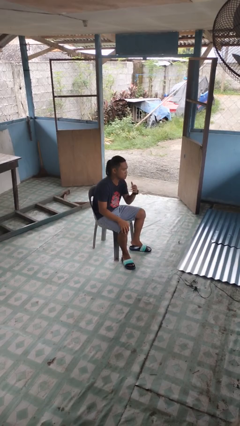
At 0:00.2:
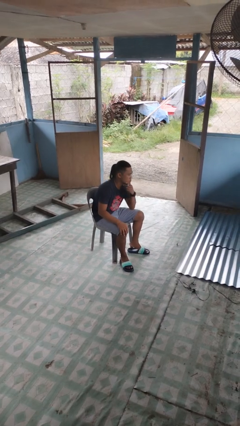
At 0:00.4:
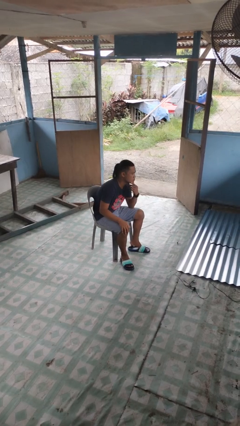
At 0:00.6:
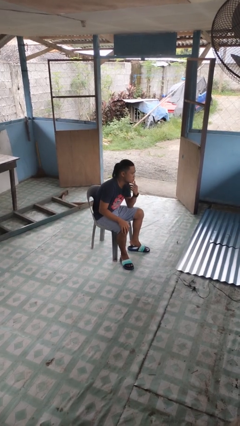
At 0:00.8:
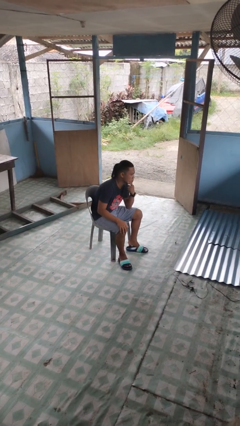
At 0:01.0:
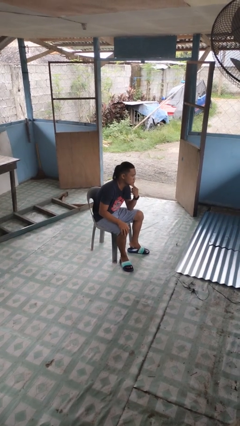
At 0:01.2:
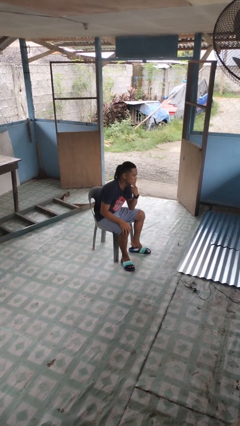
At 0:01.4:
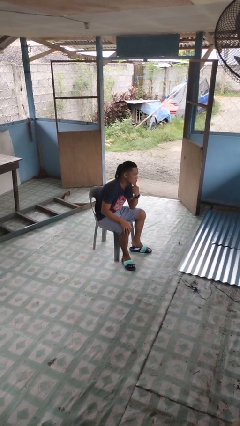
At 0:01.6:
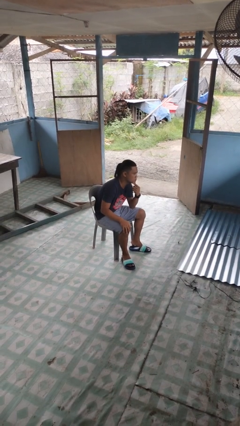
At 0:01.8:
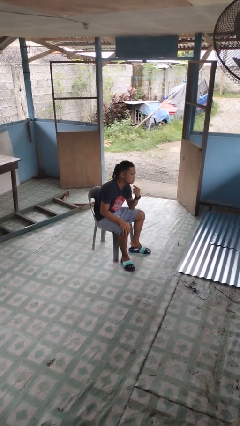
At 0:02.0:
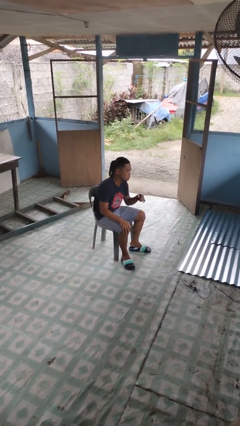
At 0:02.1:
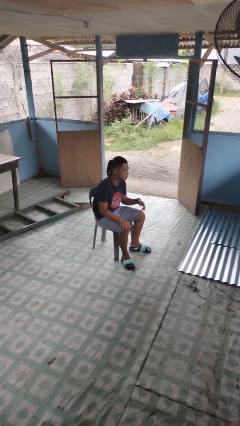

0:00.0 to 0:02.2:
person strokes chin

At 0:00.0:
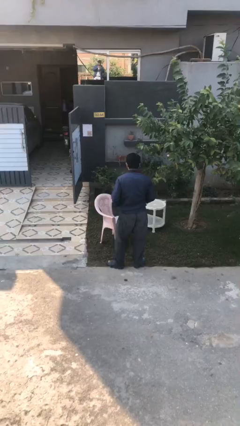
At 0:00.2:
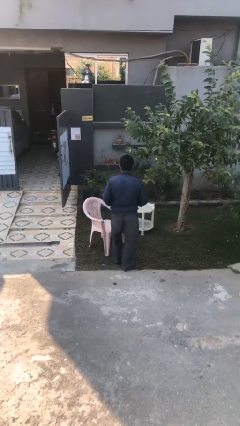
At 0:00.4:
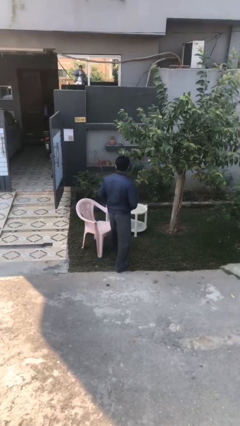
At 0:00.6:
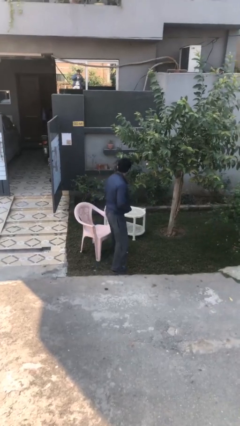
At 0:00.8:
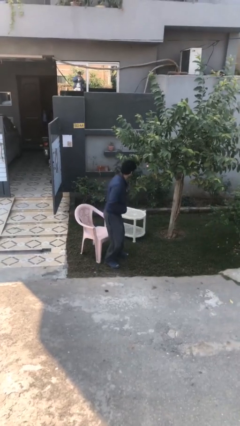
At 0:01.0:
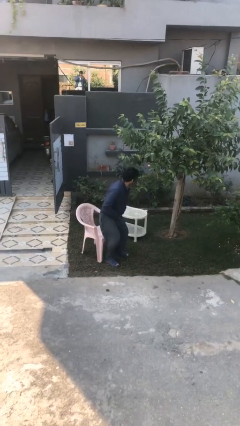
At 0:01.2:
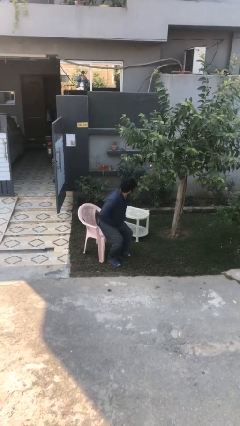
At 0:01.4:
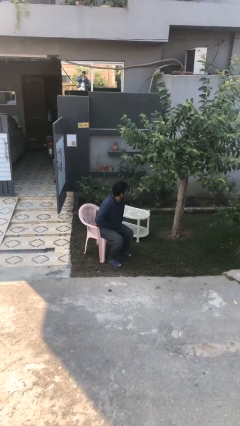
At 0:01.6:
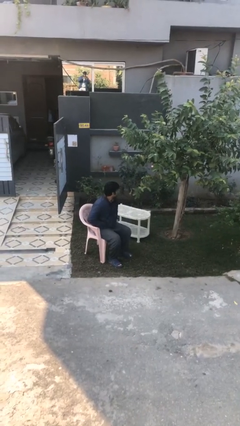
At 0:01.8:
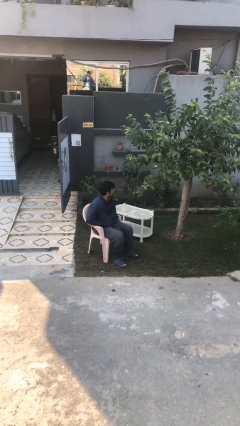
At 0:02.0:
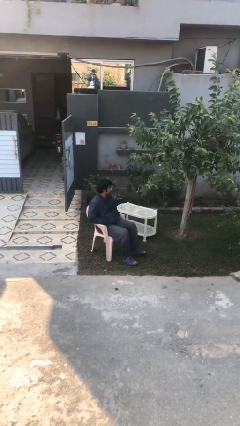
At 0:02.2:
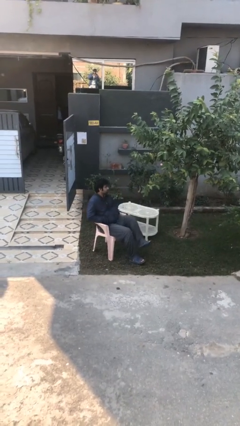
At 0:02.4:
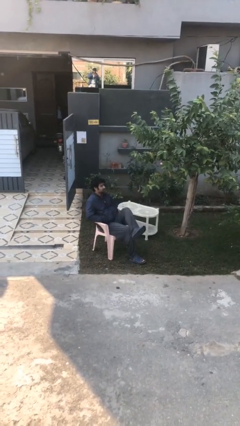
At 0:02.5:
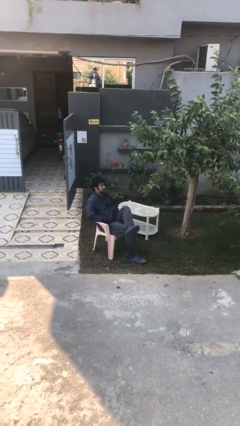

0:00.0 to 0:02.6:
person sits down

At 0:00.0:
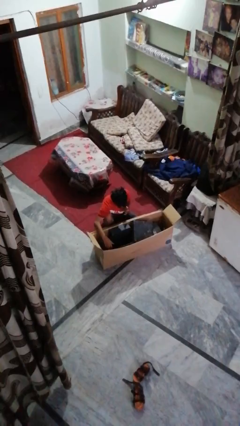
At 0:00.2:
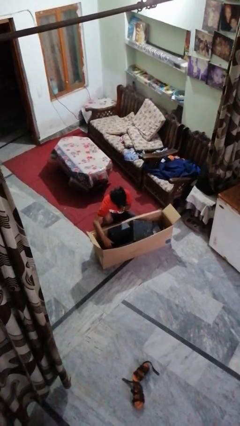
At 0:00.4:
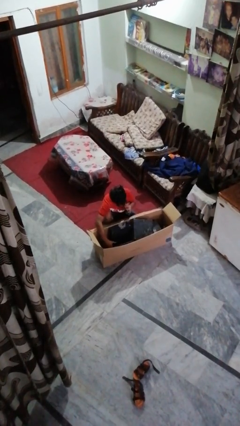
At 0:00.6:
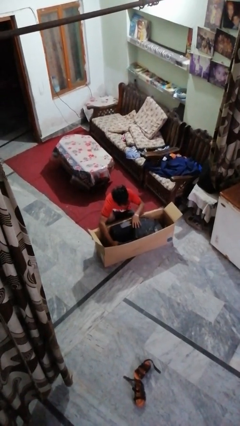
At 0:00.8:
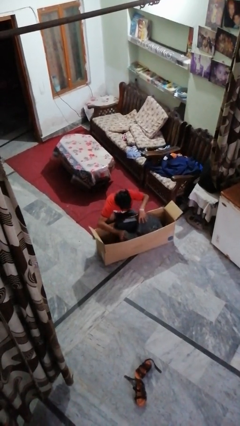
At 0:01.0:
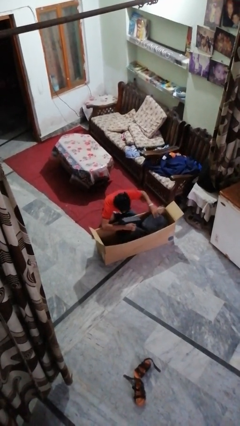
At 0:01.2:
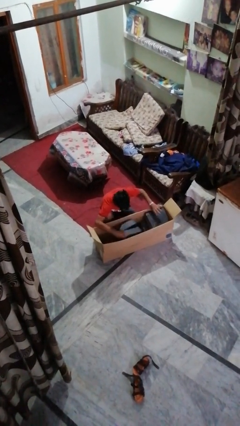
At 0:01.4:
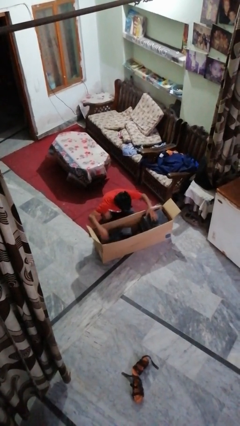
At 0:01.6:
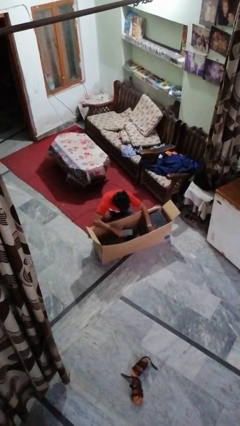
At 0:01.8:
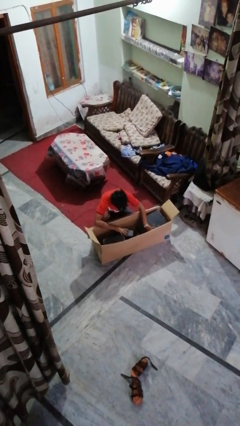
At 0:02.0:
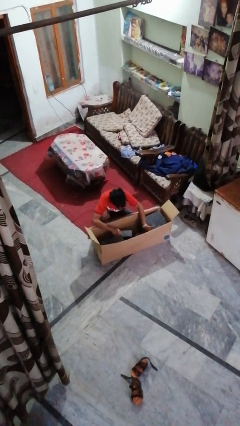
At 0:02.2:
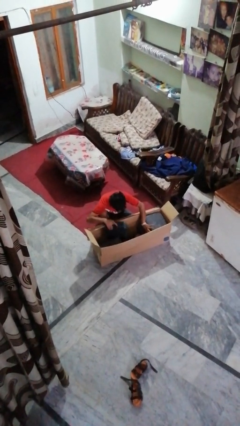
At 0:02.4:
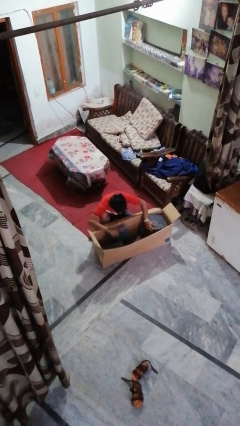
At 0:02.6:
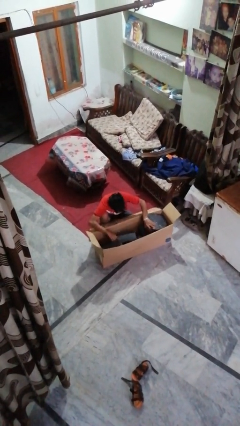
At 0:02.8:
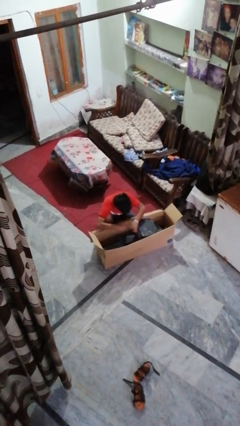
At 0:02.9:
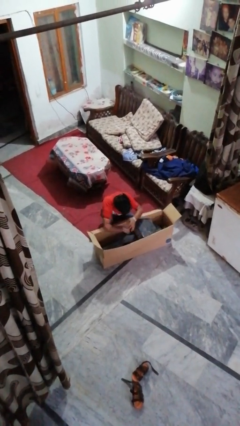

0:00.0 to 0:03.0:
person searches in box

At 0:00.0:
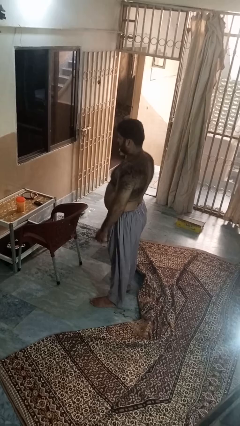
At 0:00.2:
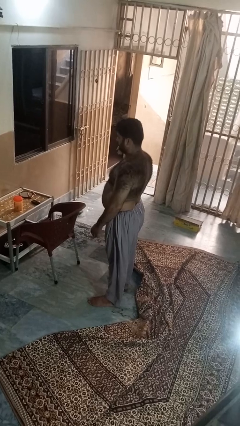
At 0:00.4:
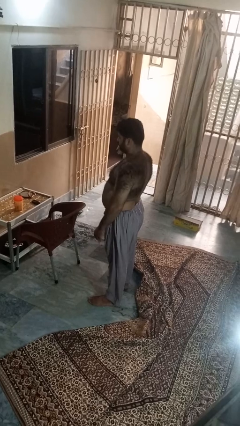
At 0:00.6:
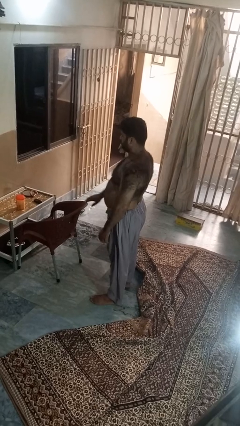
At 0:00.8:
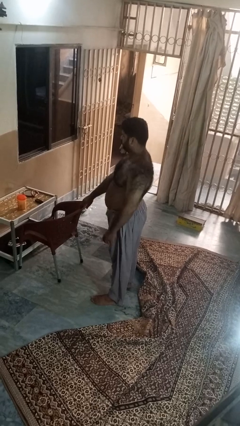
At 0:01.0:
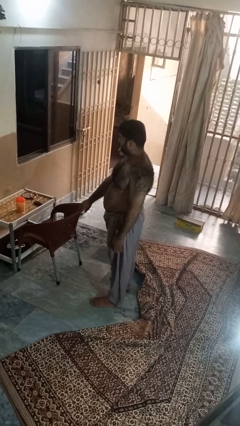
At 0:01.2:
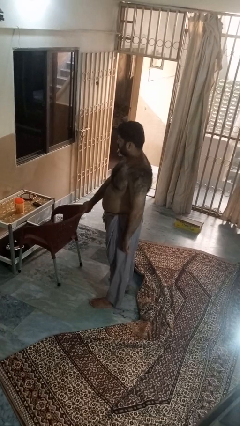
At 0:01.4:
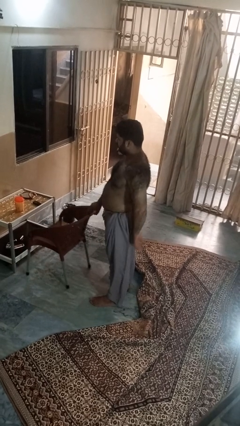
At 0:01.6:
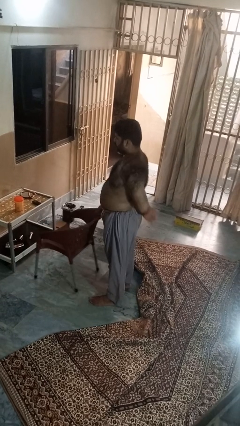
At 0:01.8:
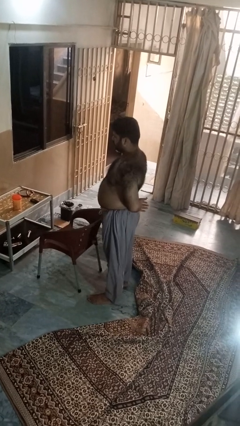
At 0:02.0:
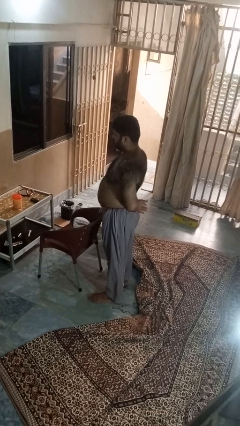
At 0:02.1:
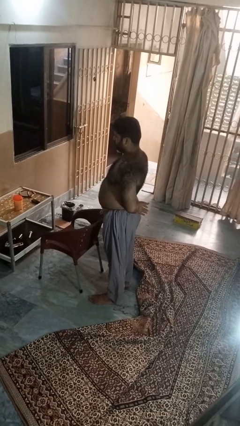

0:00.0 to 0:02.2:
person pulls out chair

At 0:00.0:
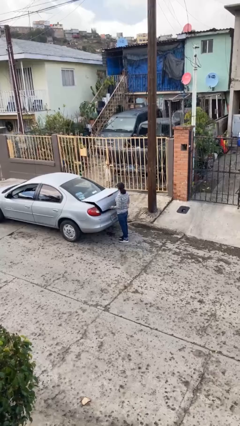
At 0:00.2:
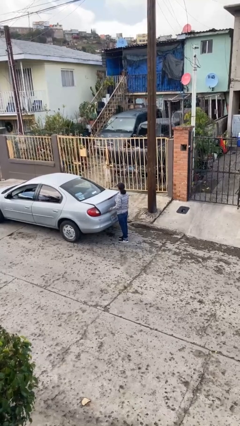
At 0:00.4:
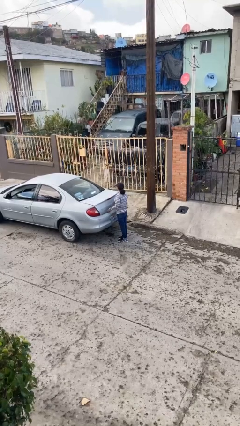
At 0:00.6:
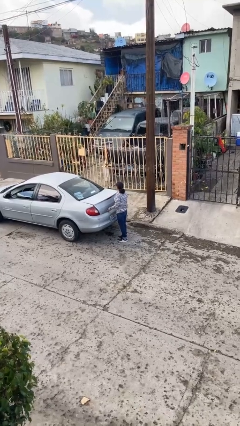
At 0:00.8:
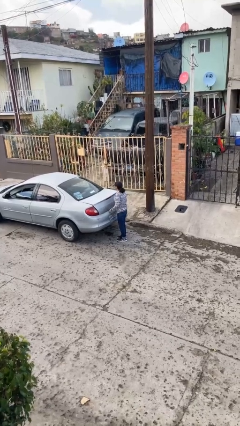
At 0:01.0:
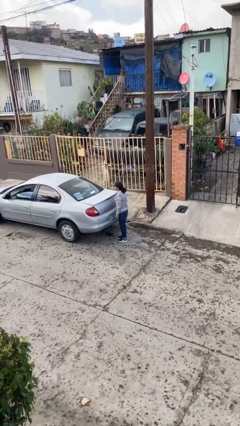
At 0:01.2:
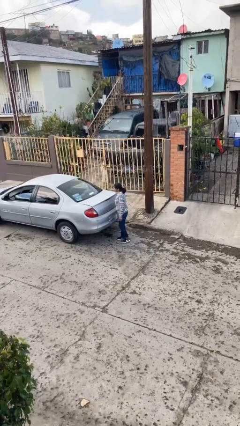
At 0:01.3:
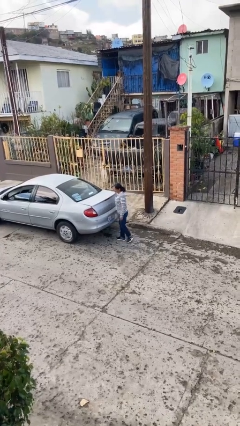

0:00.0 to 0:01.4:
person closes car trunk

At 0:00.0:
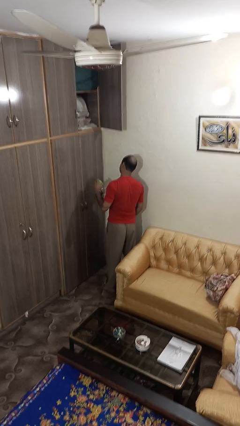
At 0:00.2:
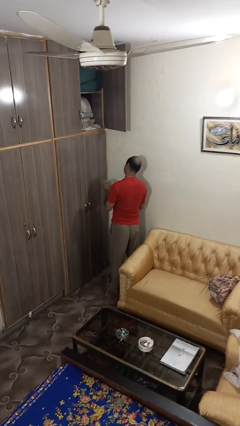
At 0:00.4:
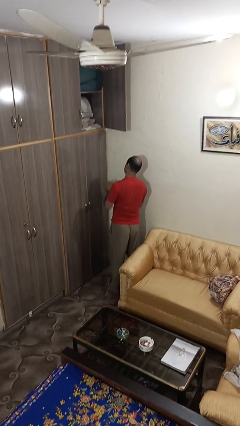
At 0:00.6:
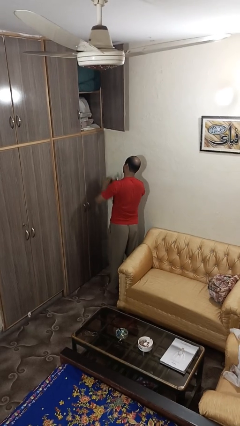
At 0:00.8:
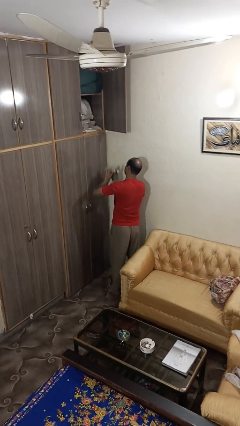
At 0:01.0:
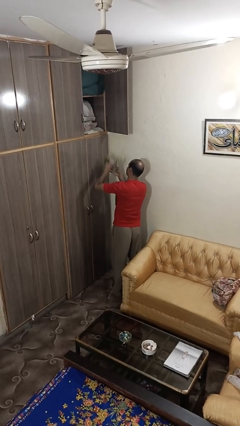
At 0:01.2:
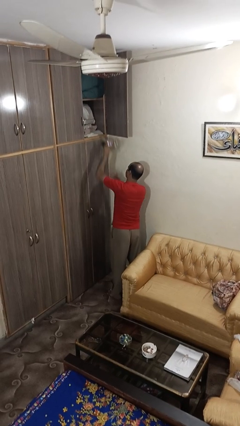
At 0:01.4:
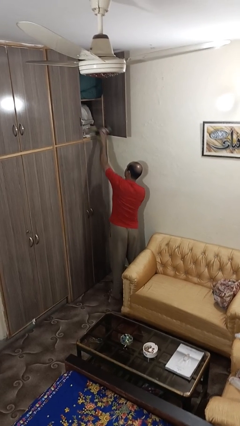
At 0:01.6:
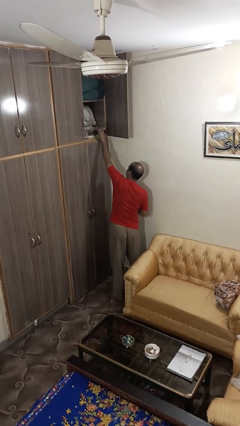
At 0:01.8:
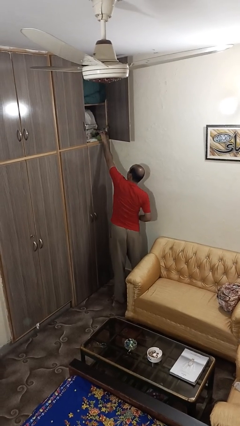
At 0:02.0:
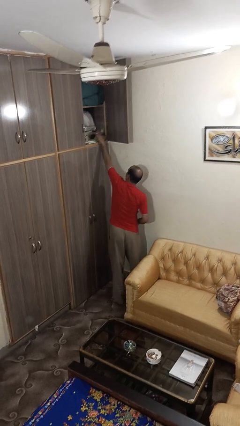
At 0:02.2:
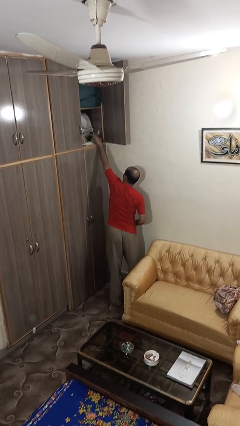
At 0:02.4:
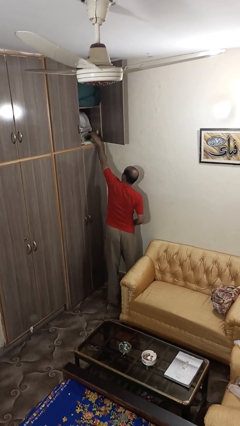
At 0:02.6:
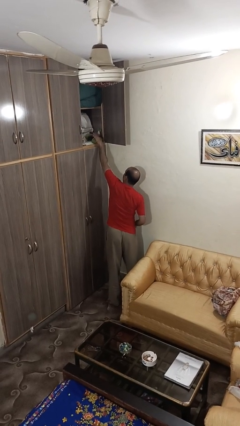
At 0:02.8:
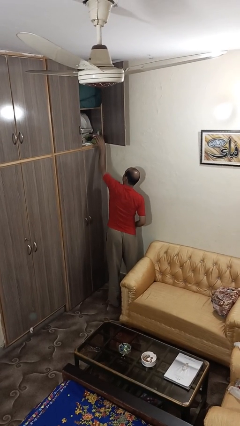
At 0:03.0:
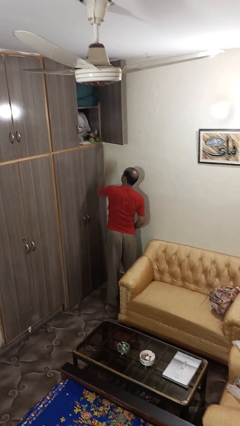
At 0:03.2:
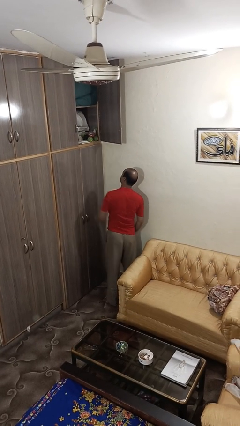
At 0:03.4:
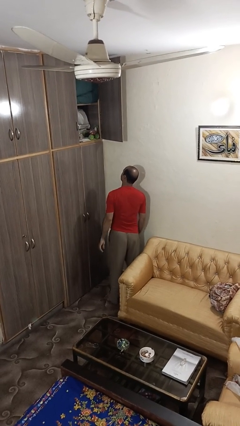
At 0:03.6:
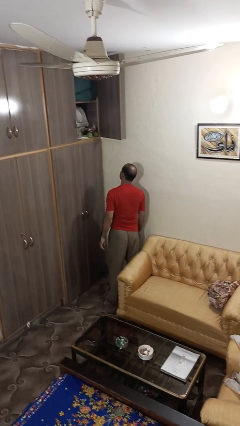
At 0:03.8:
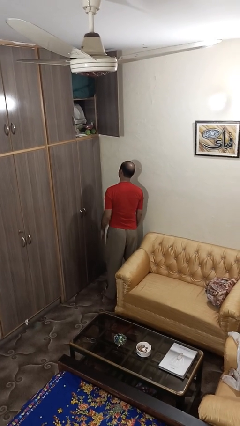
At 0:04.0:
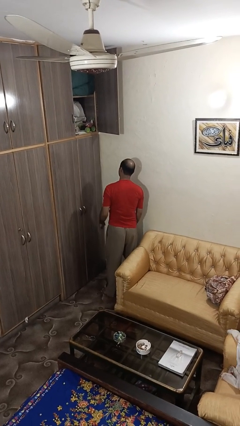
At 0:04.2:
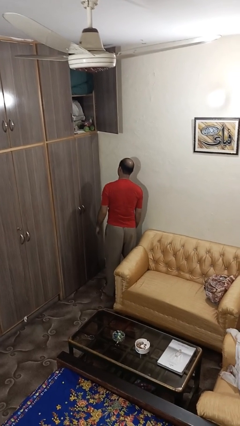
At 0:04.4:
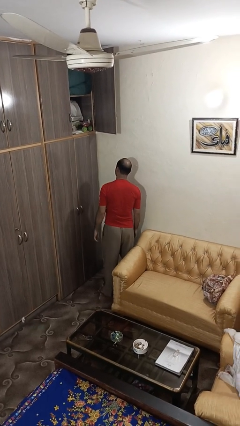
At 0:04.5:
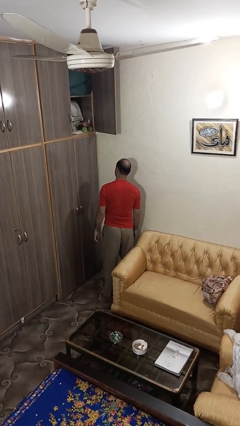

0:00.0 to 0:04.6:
person puts down object on shelf

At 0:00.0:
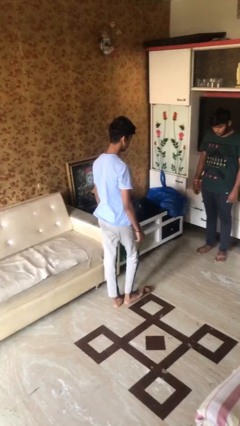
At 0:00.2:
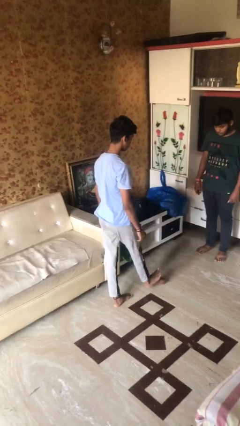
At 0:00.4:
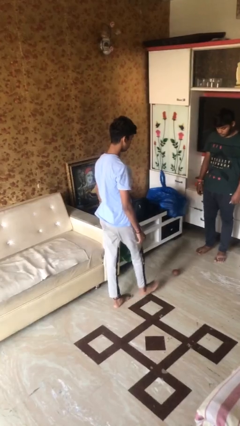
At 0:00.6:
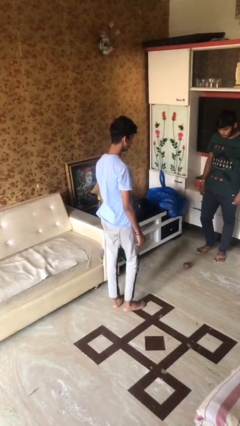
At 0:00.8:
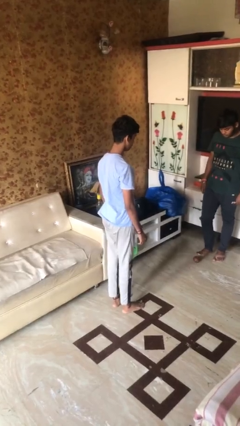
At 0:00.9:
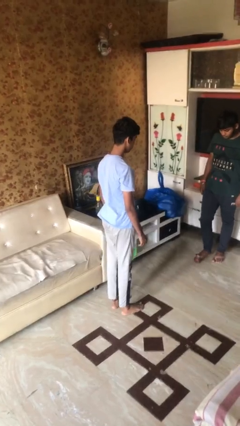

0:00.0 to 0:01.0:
person kicks object to person

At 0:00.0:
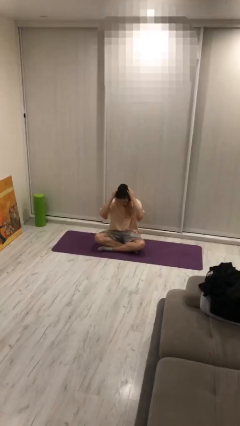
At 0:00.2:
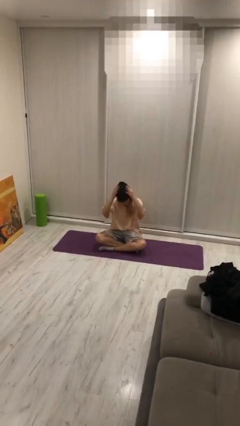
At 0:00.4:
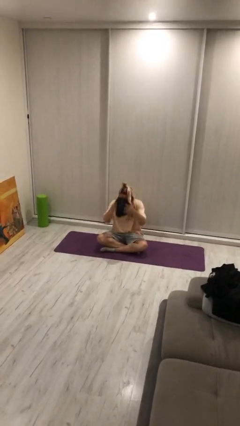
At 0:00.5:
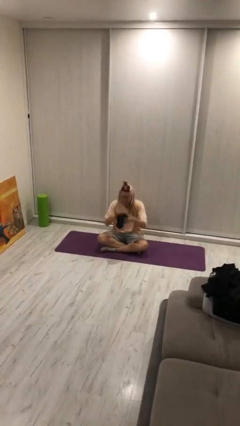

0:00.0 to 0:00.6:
person takes off hat
